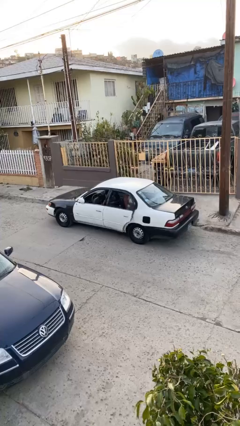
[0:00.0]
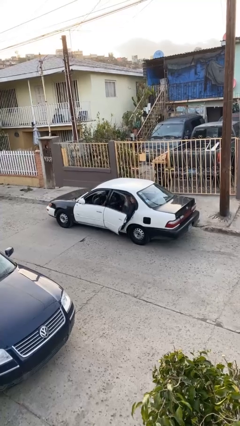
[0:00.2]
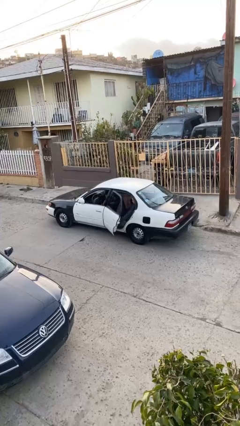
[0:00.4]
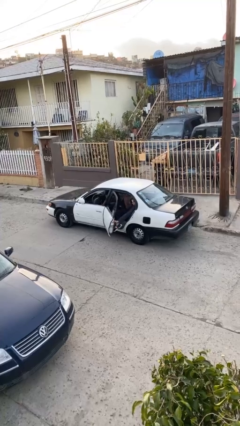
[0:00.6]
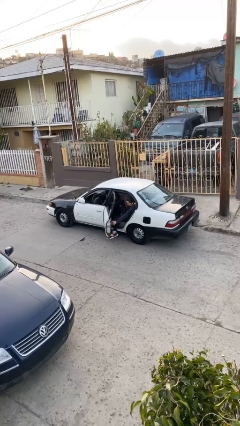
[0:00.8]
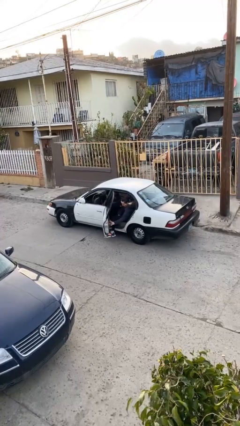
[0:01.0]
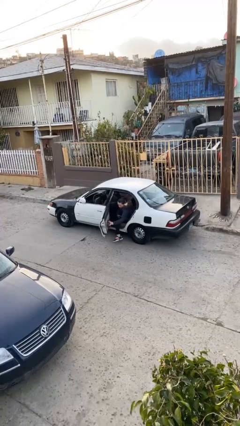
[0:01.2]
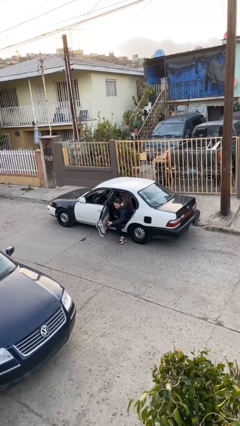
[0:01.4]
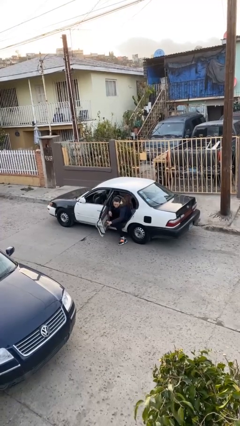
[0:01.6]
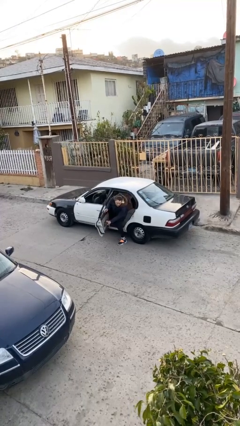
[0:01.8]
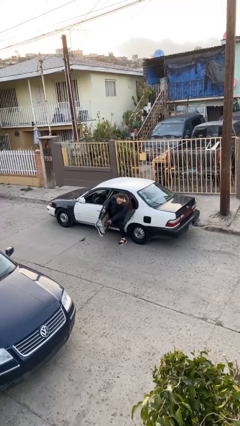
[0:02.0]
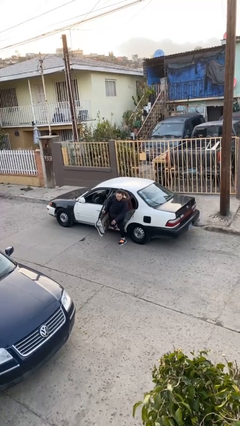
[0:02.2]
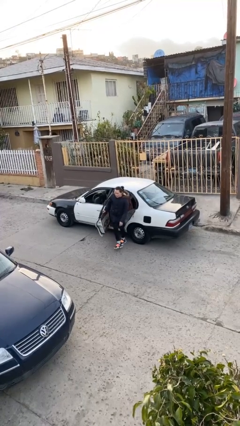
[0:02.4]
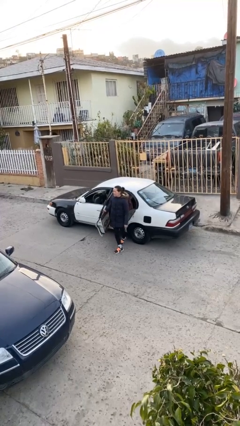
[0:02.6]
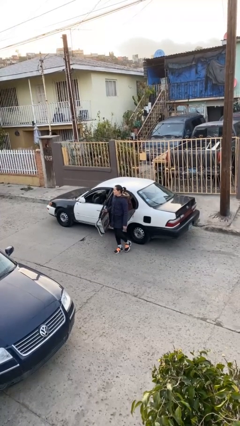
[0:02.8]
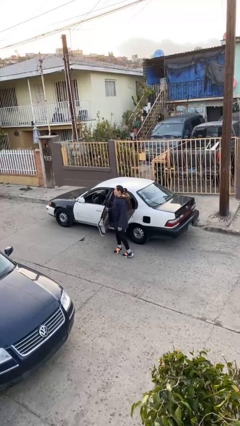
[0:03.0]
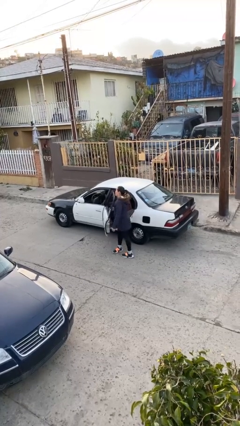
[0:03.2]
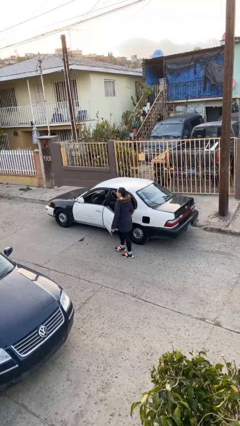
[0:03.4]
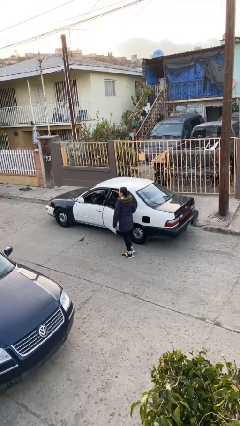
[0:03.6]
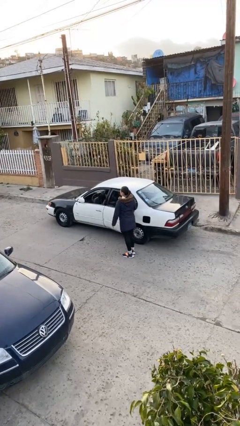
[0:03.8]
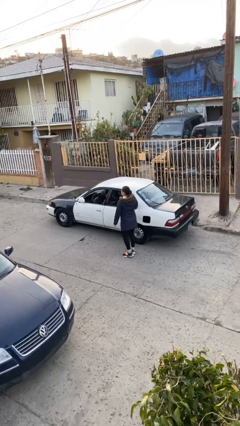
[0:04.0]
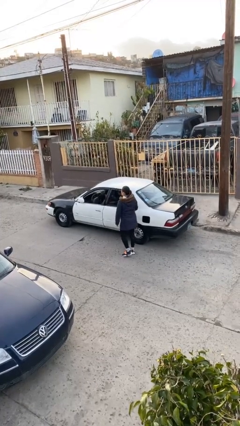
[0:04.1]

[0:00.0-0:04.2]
car drops off person

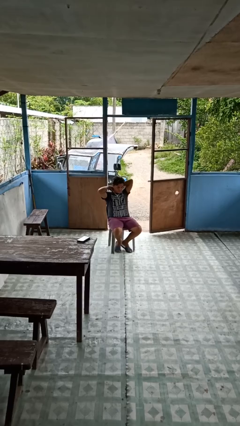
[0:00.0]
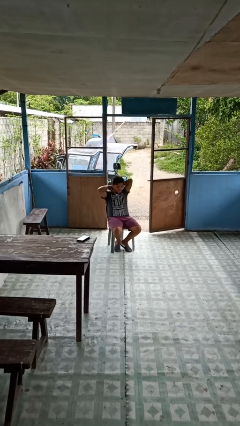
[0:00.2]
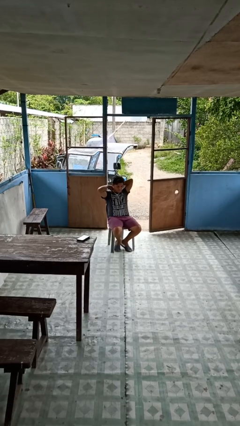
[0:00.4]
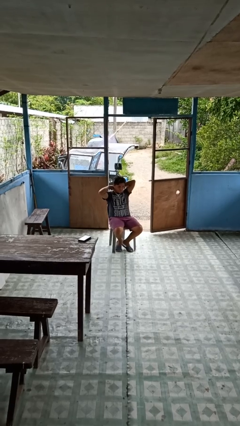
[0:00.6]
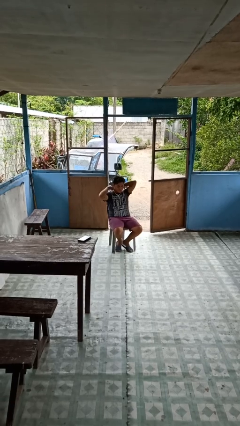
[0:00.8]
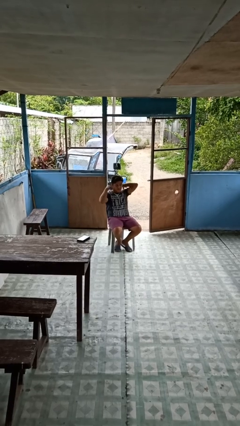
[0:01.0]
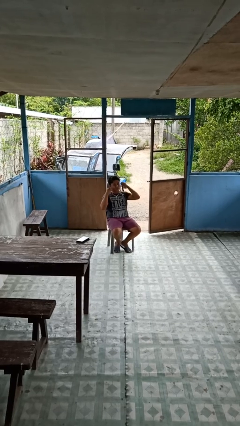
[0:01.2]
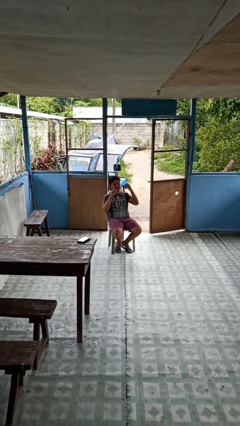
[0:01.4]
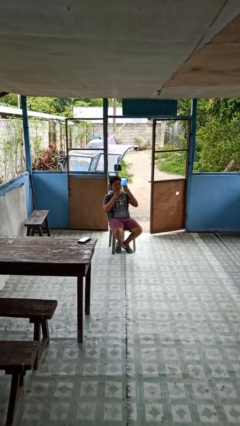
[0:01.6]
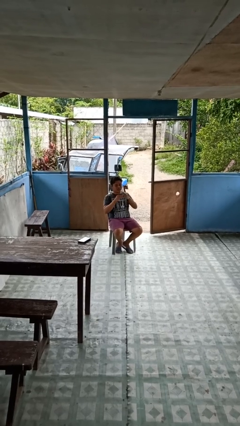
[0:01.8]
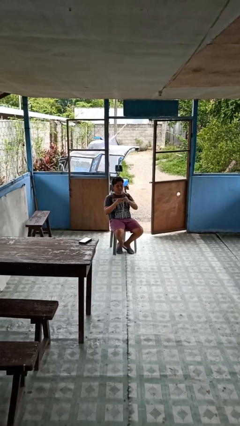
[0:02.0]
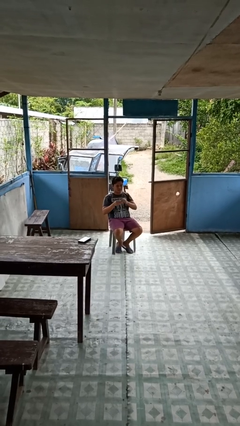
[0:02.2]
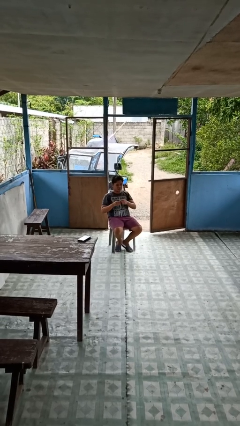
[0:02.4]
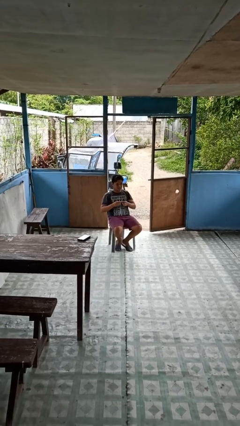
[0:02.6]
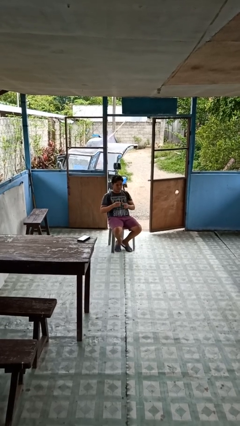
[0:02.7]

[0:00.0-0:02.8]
person takes off necklace

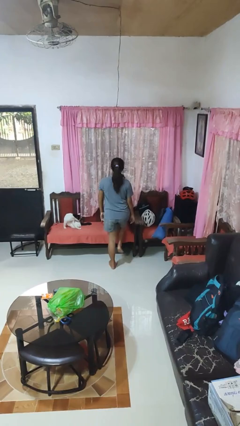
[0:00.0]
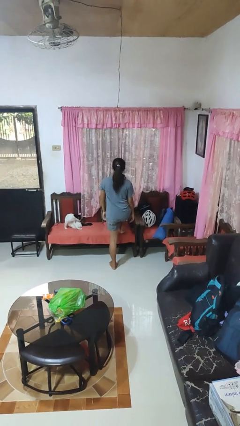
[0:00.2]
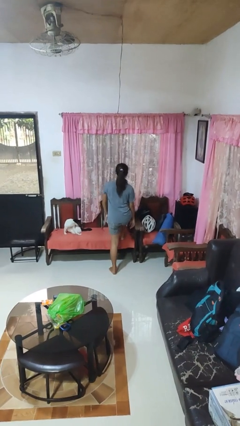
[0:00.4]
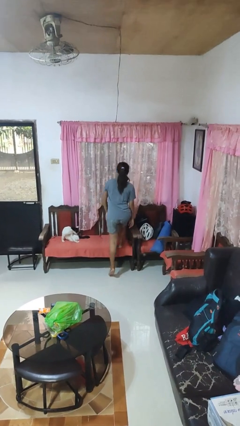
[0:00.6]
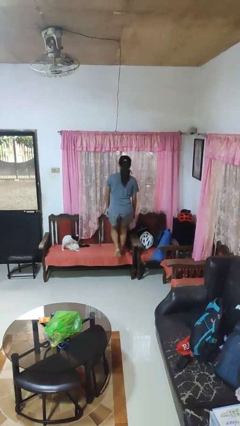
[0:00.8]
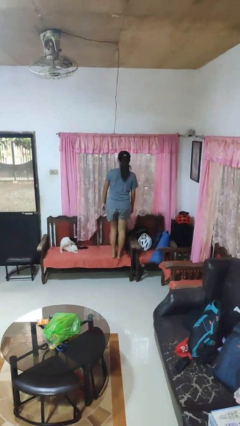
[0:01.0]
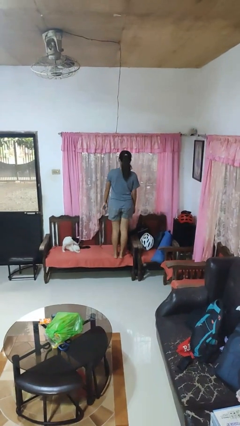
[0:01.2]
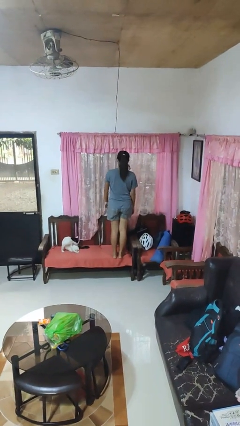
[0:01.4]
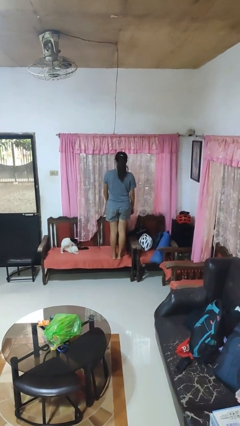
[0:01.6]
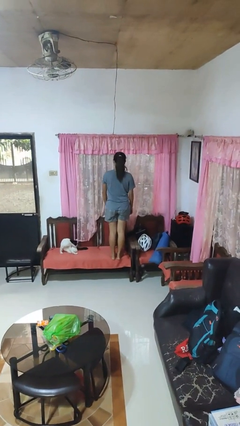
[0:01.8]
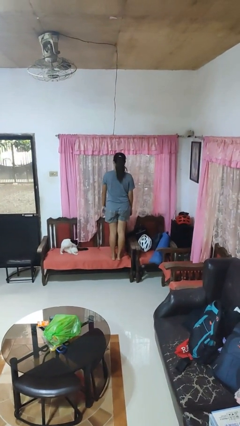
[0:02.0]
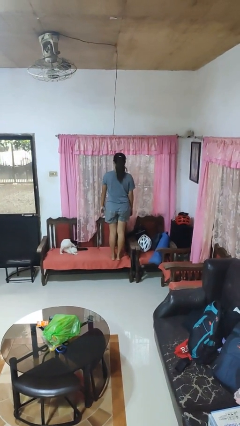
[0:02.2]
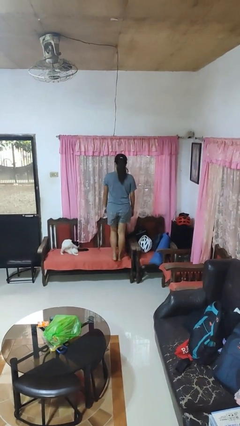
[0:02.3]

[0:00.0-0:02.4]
person climbs on chair

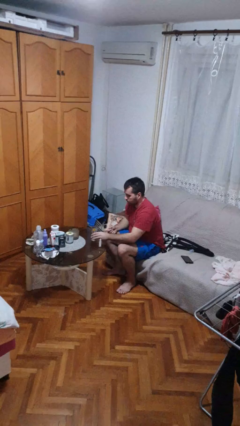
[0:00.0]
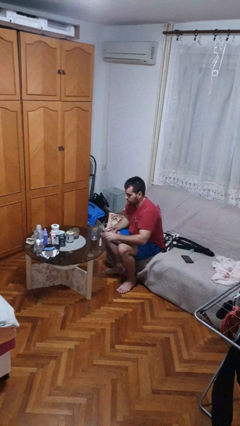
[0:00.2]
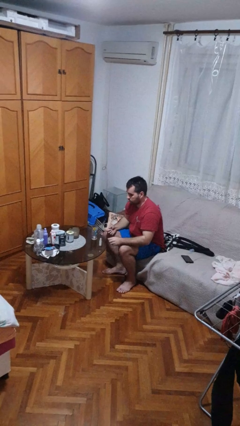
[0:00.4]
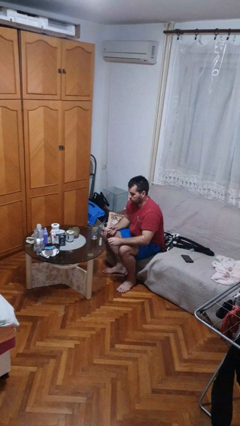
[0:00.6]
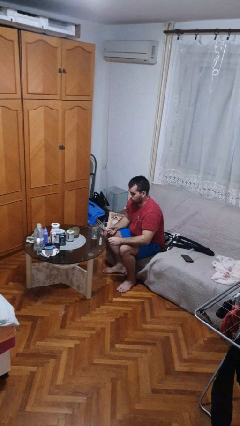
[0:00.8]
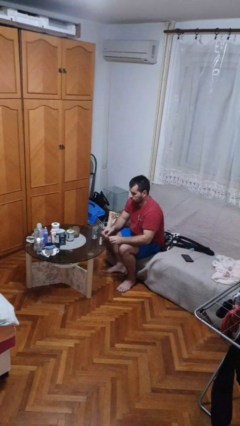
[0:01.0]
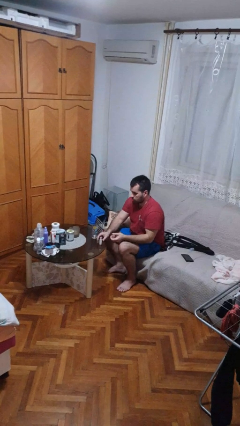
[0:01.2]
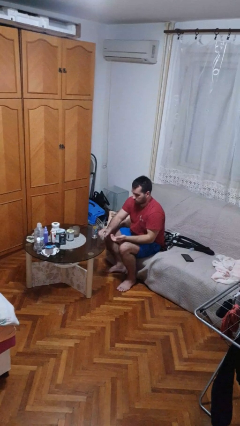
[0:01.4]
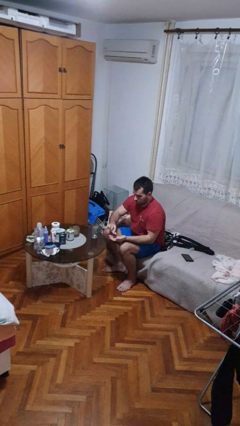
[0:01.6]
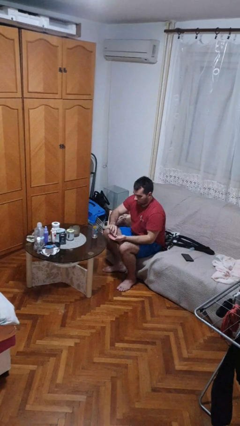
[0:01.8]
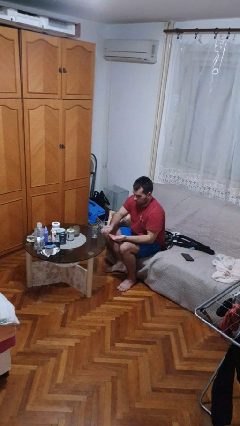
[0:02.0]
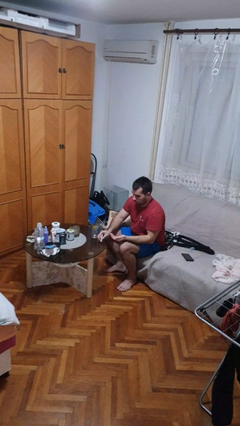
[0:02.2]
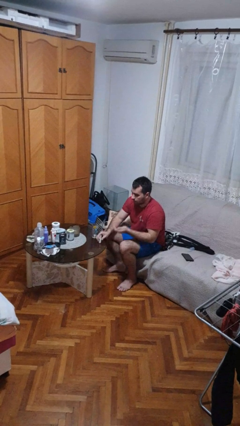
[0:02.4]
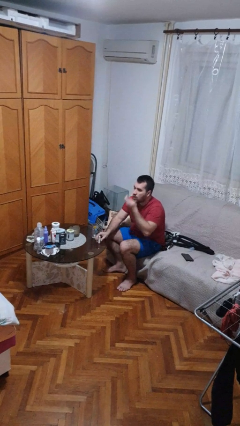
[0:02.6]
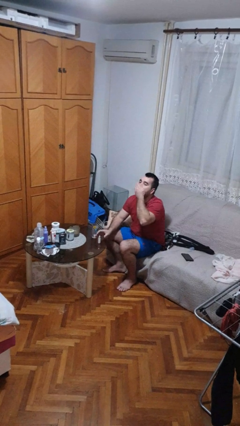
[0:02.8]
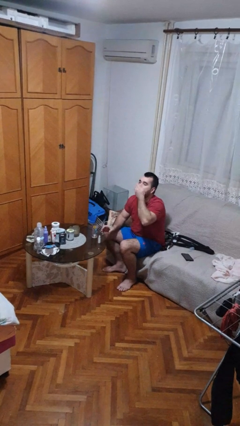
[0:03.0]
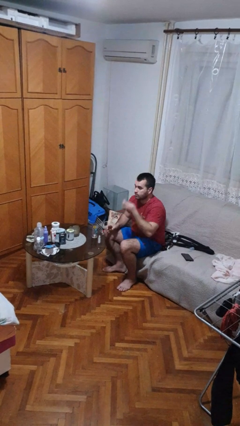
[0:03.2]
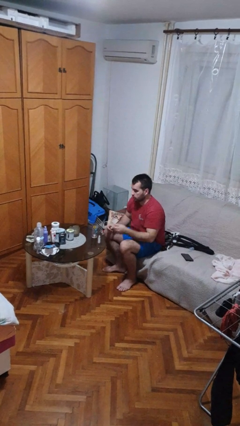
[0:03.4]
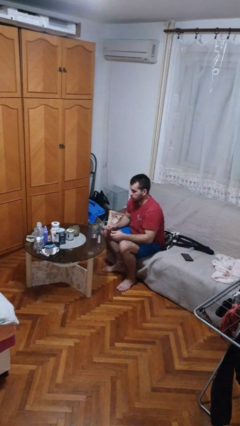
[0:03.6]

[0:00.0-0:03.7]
person takes medicine pills

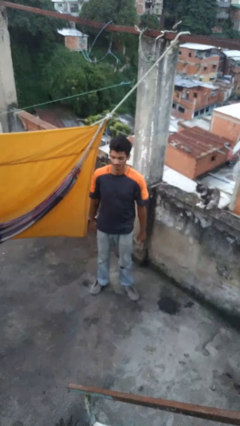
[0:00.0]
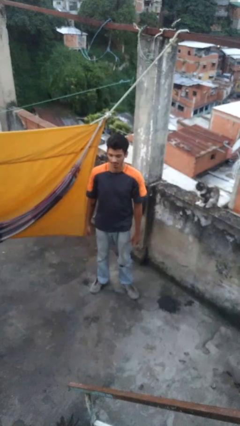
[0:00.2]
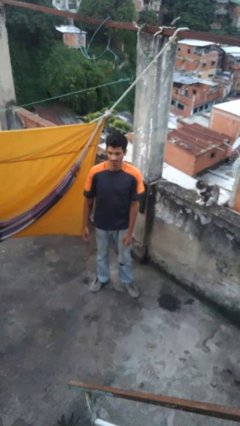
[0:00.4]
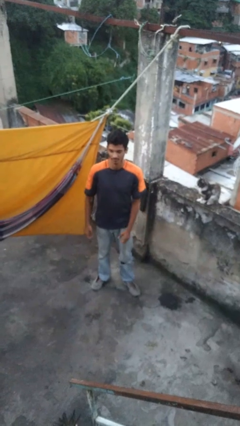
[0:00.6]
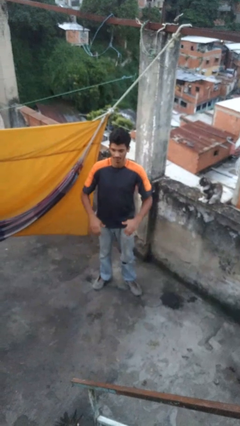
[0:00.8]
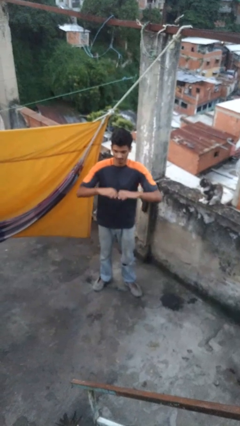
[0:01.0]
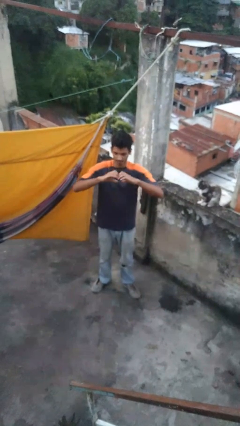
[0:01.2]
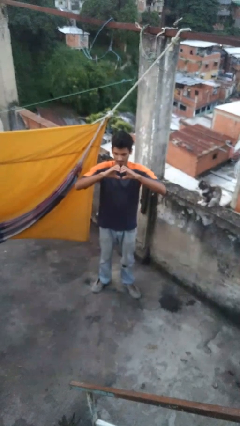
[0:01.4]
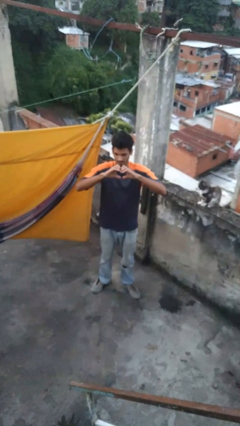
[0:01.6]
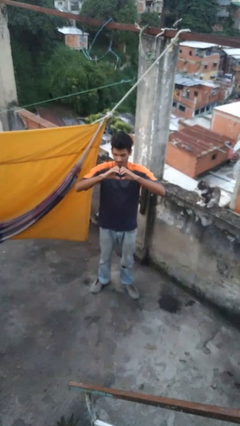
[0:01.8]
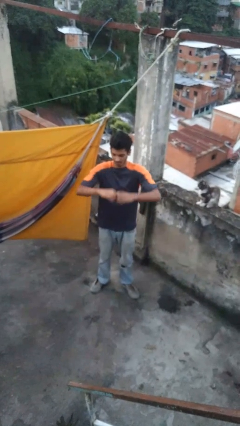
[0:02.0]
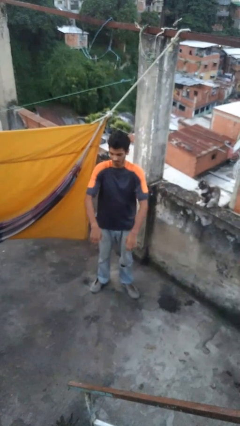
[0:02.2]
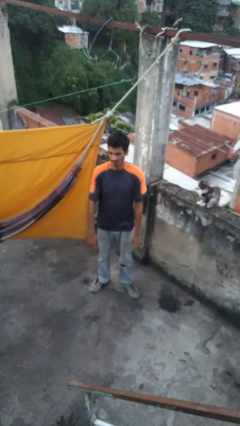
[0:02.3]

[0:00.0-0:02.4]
person gestures heart

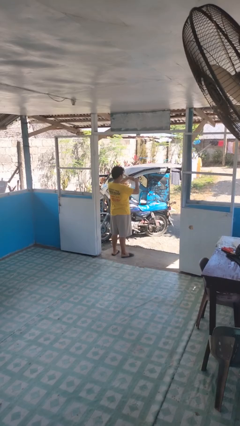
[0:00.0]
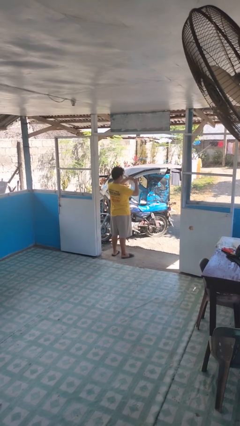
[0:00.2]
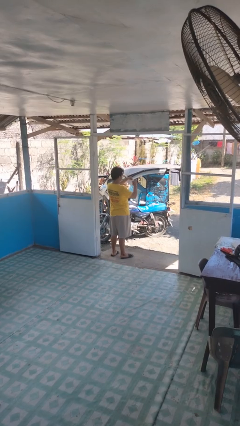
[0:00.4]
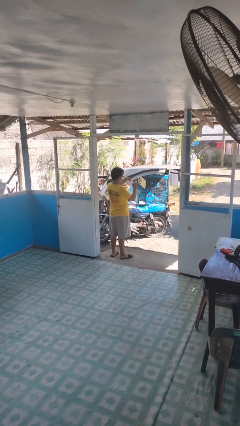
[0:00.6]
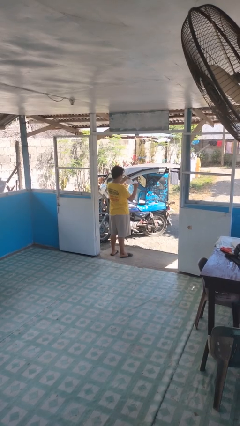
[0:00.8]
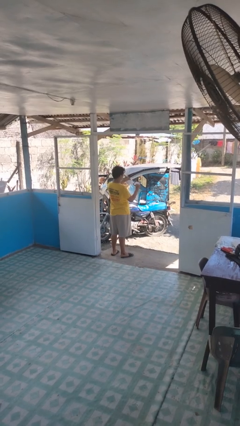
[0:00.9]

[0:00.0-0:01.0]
person tears paper

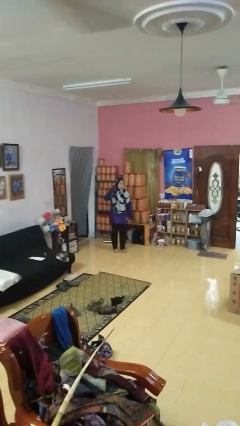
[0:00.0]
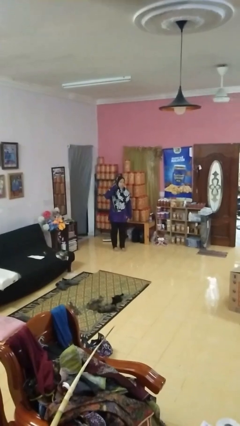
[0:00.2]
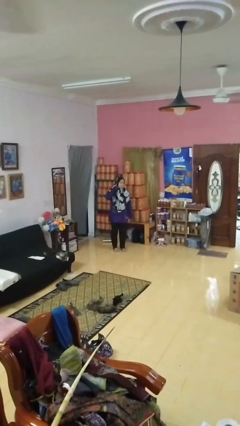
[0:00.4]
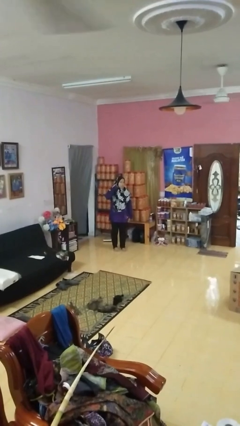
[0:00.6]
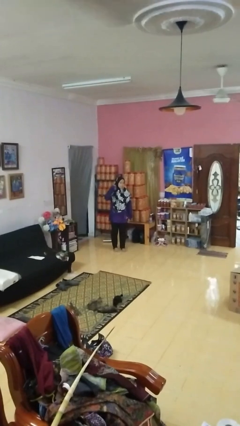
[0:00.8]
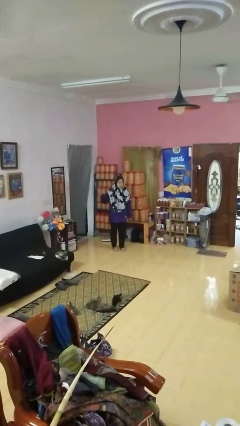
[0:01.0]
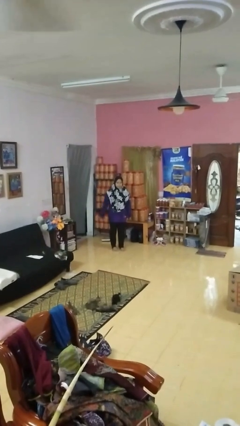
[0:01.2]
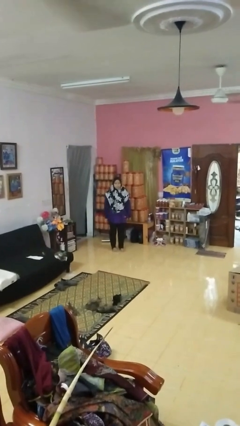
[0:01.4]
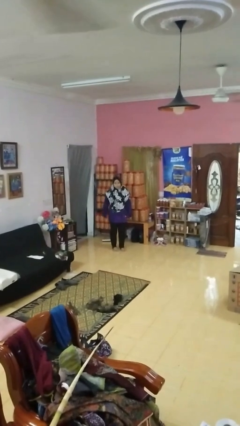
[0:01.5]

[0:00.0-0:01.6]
person gestures listen closely
